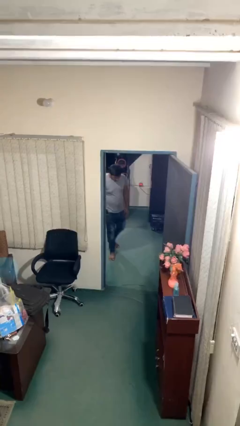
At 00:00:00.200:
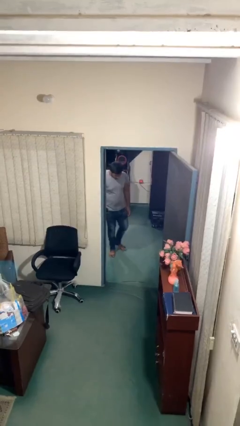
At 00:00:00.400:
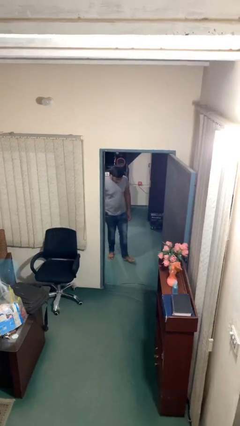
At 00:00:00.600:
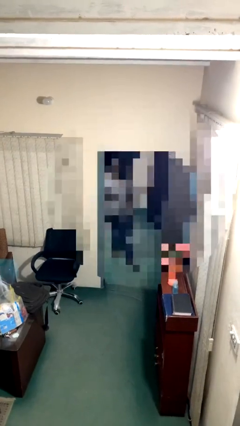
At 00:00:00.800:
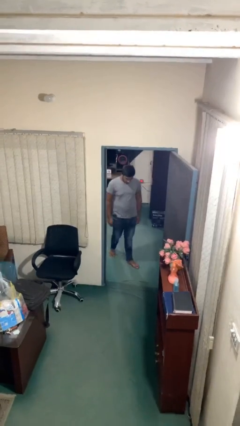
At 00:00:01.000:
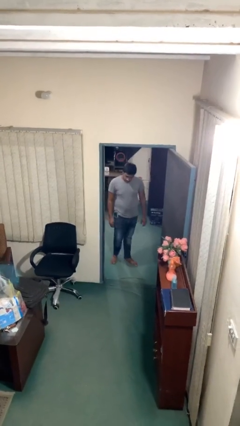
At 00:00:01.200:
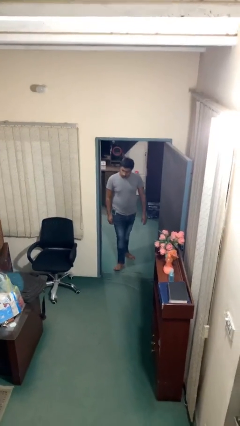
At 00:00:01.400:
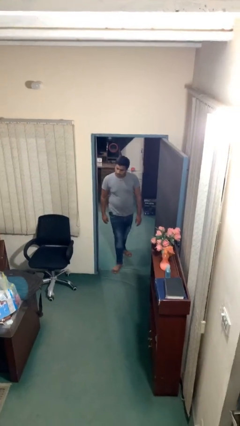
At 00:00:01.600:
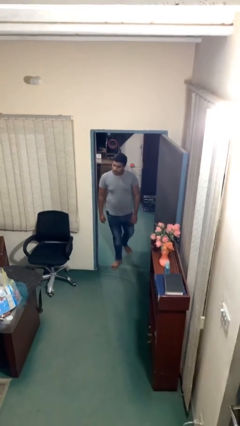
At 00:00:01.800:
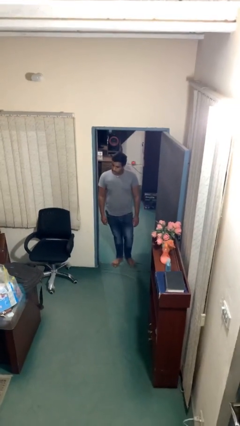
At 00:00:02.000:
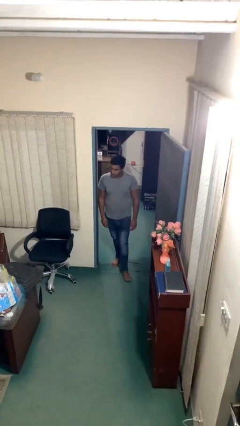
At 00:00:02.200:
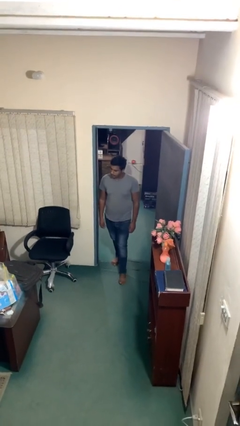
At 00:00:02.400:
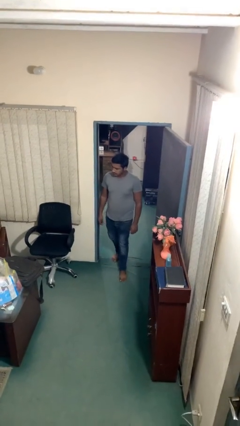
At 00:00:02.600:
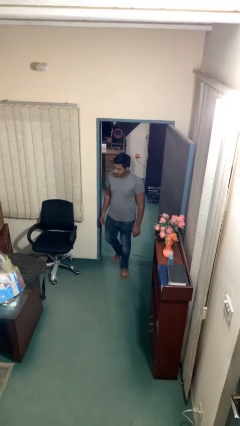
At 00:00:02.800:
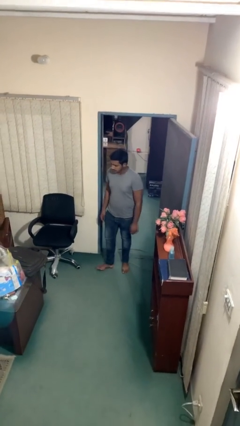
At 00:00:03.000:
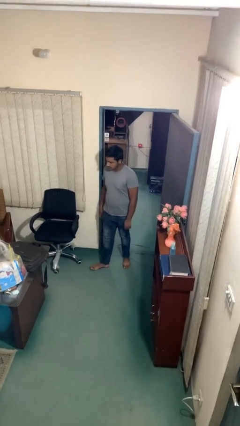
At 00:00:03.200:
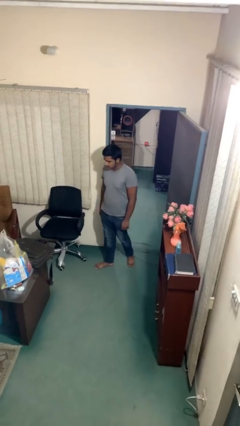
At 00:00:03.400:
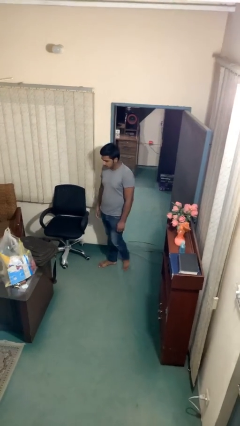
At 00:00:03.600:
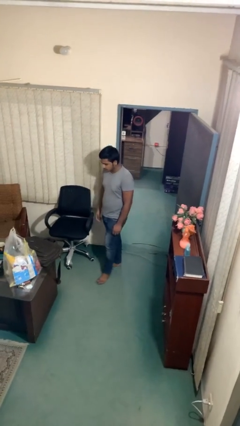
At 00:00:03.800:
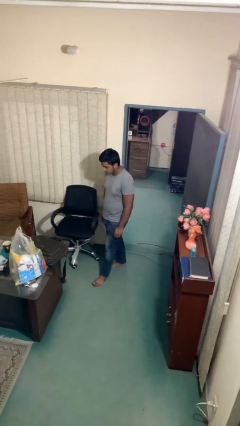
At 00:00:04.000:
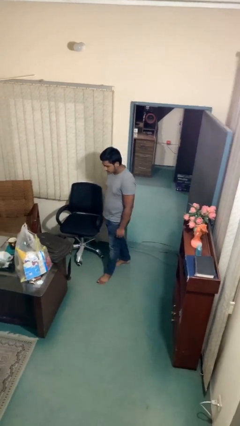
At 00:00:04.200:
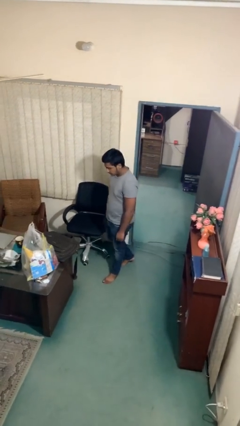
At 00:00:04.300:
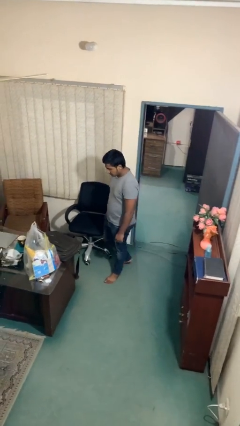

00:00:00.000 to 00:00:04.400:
person enters scene through structure

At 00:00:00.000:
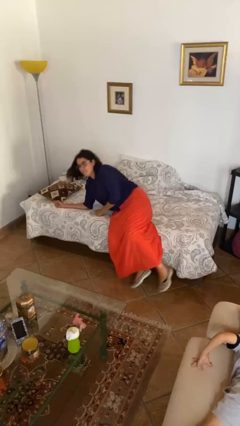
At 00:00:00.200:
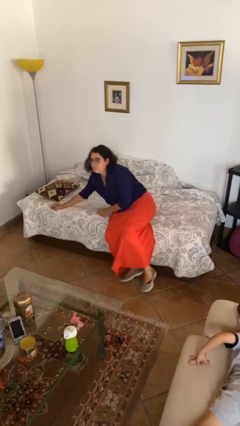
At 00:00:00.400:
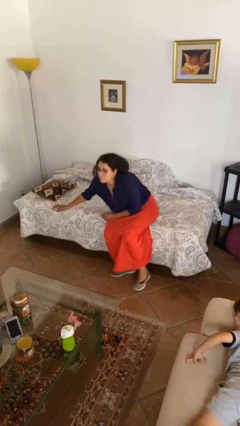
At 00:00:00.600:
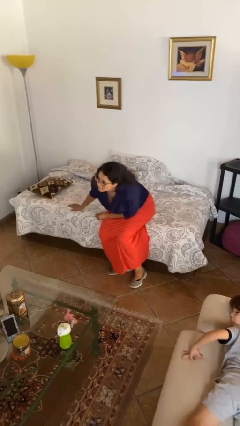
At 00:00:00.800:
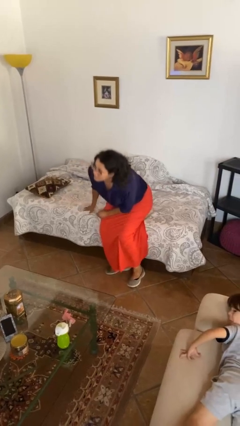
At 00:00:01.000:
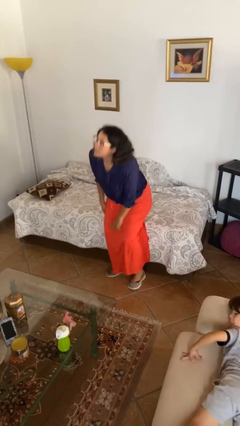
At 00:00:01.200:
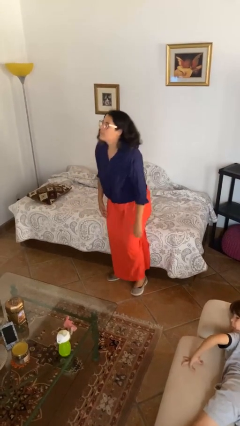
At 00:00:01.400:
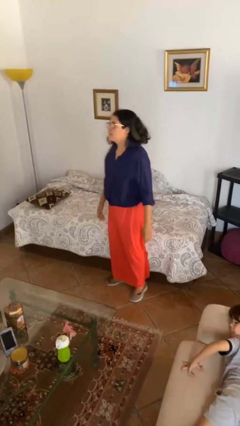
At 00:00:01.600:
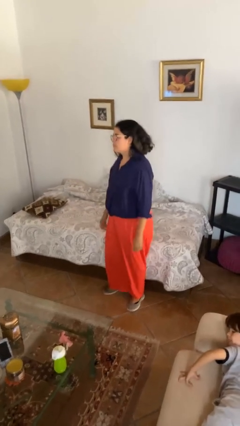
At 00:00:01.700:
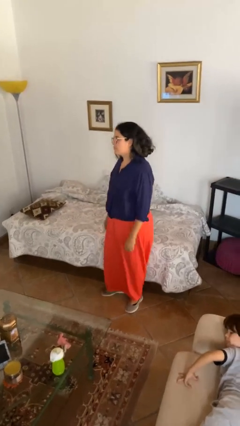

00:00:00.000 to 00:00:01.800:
person stands up

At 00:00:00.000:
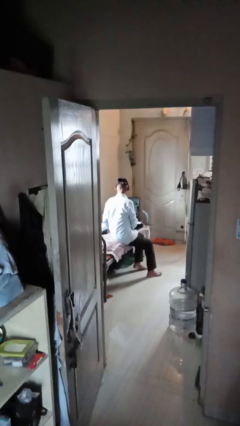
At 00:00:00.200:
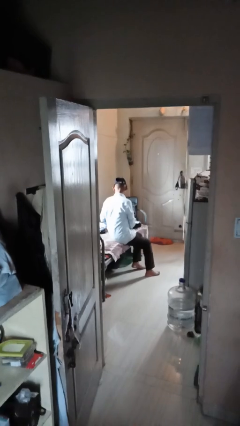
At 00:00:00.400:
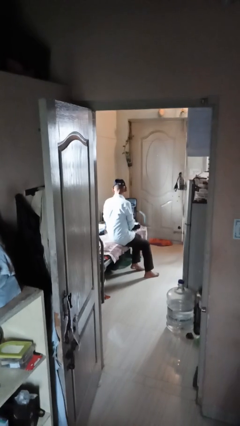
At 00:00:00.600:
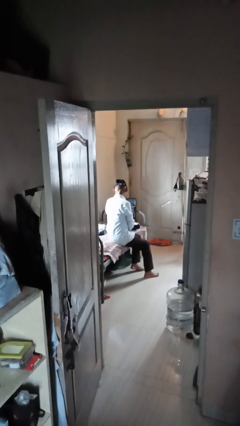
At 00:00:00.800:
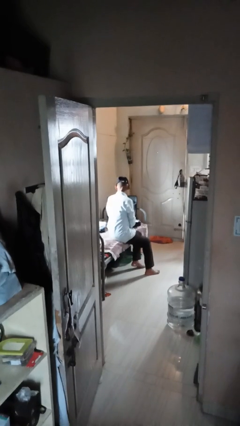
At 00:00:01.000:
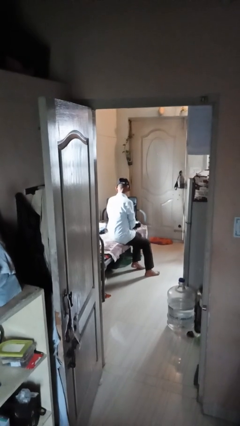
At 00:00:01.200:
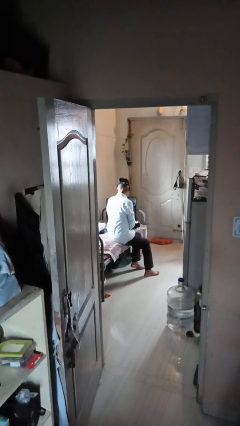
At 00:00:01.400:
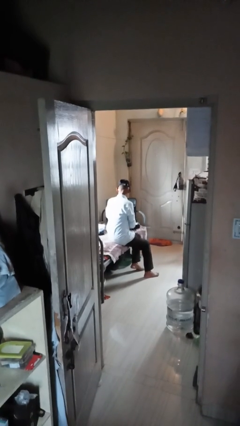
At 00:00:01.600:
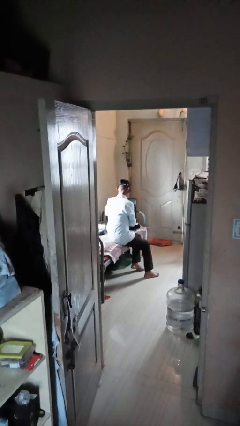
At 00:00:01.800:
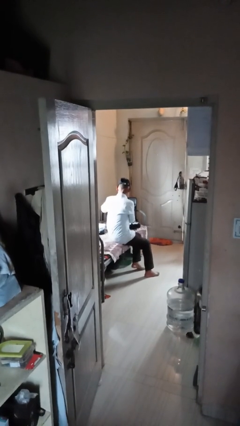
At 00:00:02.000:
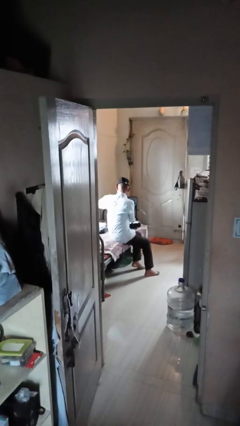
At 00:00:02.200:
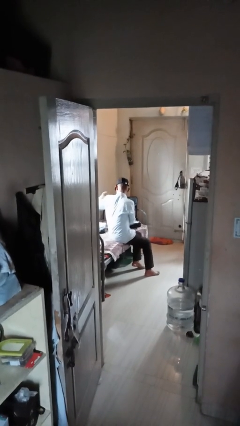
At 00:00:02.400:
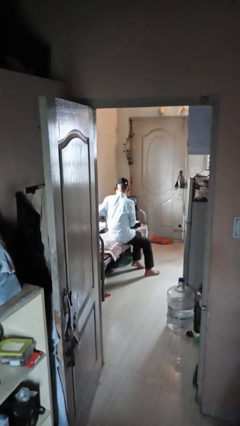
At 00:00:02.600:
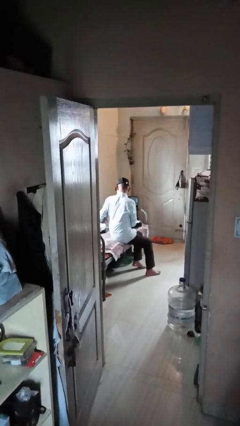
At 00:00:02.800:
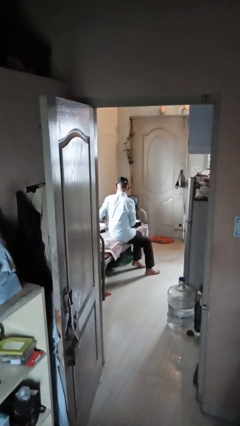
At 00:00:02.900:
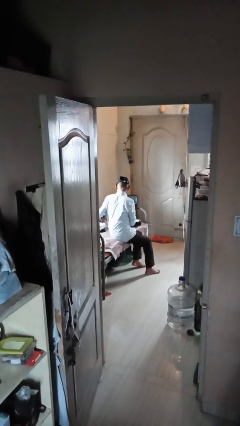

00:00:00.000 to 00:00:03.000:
person unloads clothes from suitcase

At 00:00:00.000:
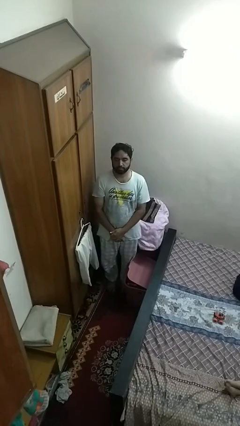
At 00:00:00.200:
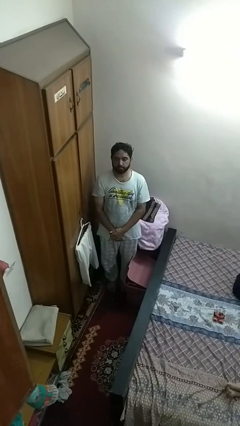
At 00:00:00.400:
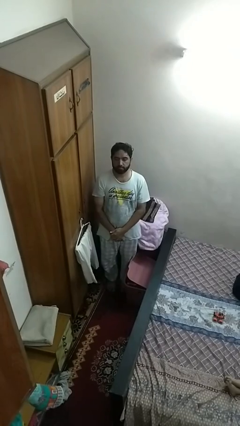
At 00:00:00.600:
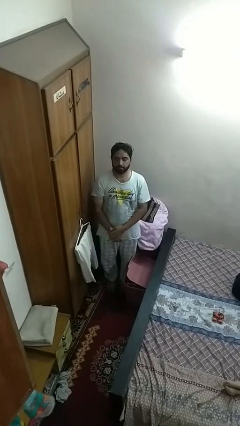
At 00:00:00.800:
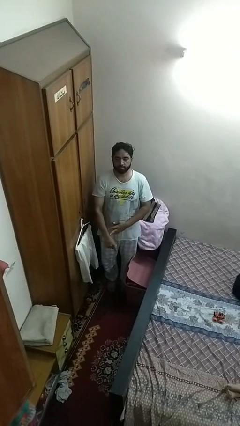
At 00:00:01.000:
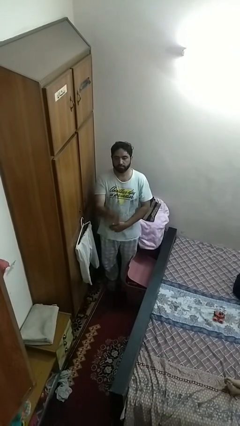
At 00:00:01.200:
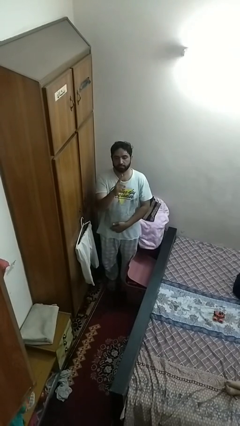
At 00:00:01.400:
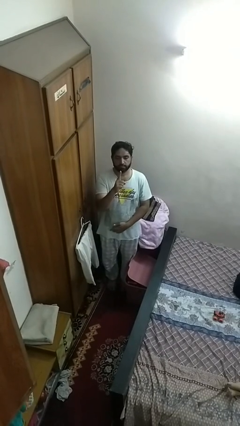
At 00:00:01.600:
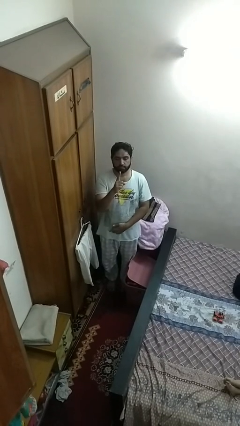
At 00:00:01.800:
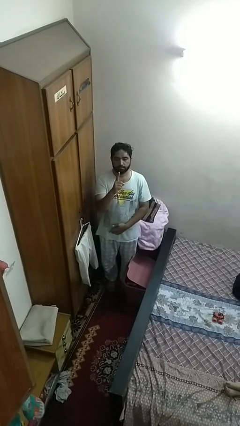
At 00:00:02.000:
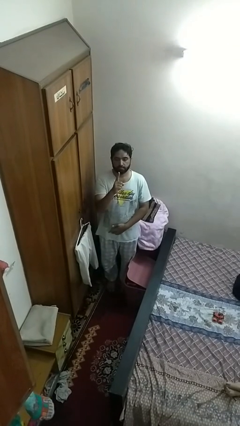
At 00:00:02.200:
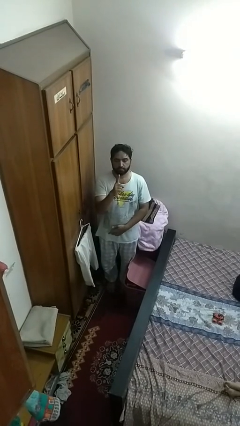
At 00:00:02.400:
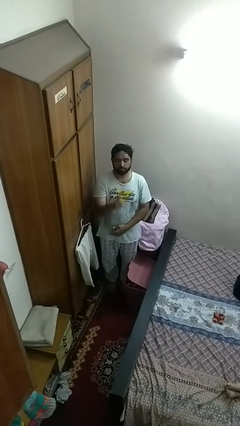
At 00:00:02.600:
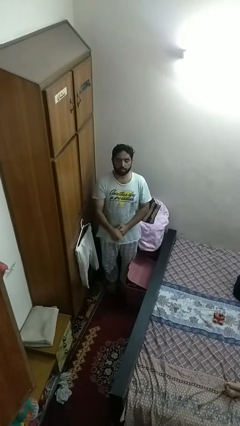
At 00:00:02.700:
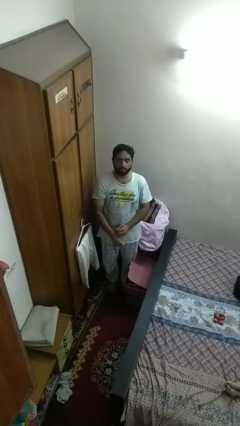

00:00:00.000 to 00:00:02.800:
person gestures number one

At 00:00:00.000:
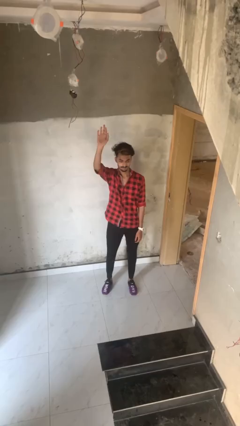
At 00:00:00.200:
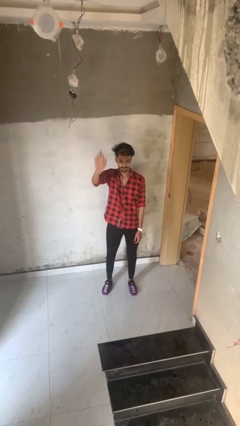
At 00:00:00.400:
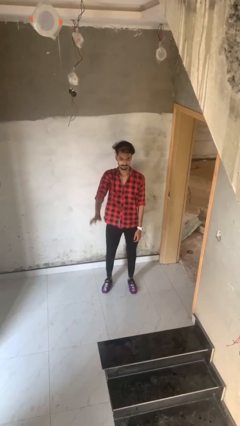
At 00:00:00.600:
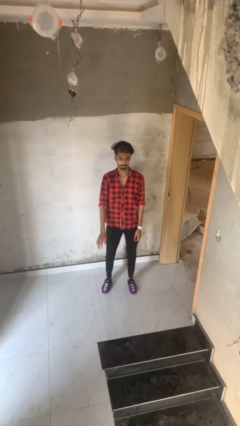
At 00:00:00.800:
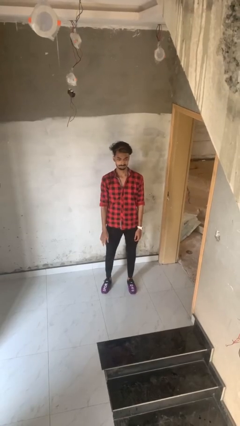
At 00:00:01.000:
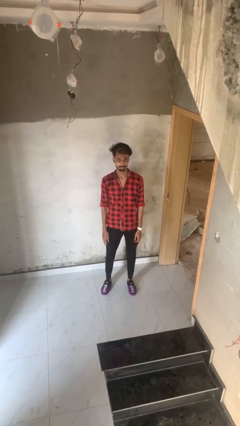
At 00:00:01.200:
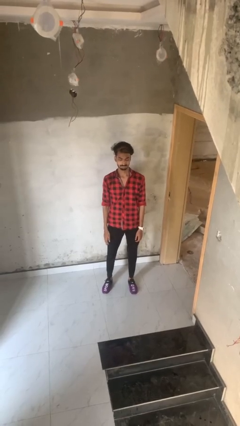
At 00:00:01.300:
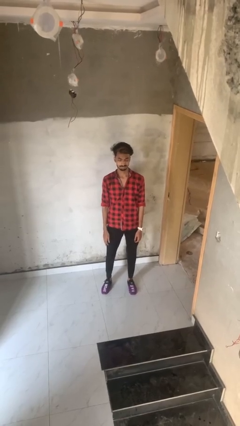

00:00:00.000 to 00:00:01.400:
person gestures lower hand

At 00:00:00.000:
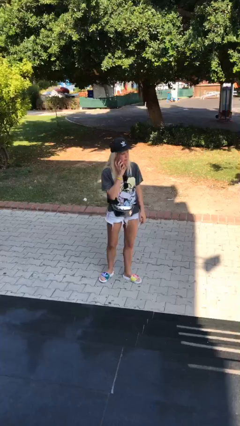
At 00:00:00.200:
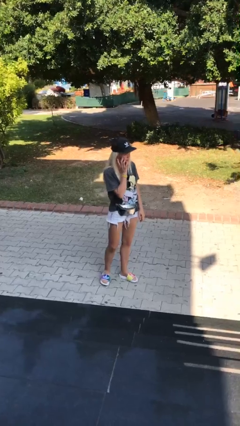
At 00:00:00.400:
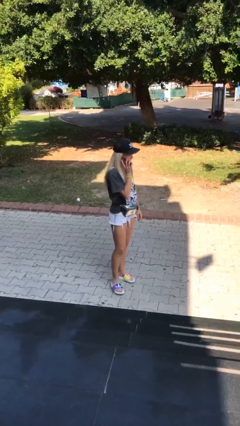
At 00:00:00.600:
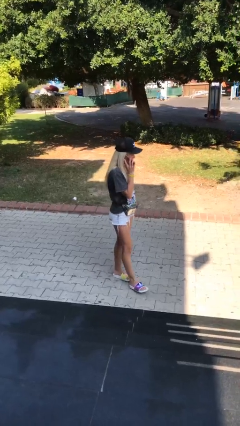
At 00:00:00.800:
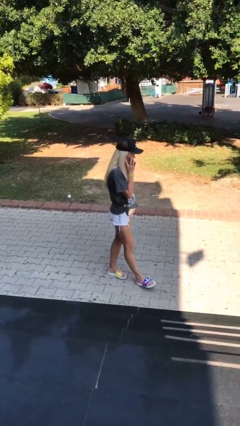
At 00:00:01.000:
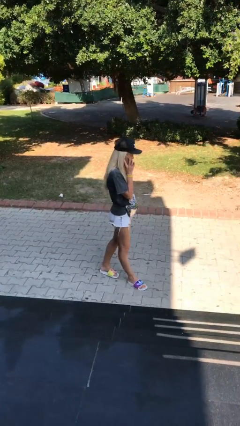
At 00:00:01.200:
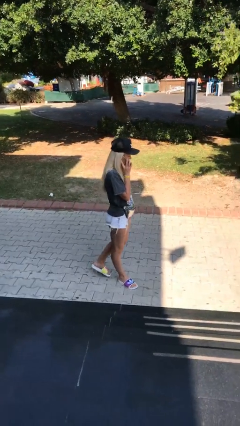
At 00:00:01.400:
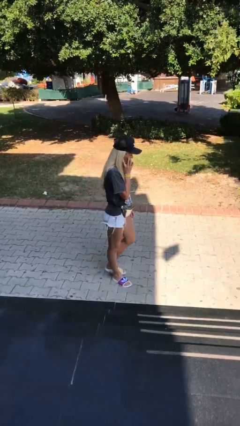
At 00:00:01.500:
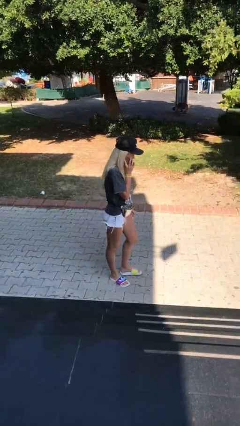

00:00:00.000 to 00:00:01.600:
person talks on phone

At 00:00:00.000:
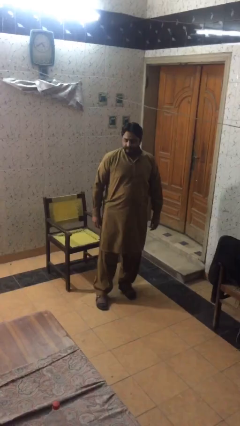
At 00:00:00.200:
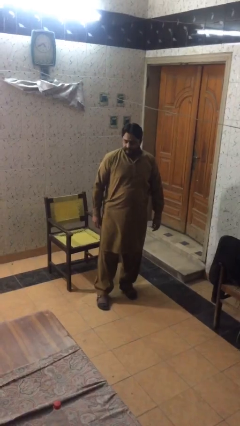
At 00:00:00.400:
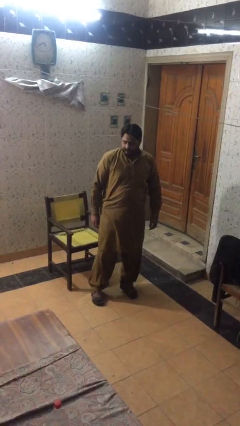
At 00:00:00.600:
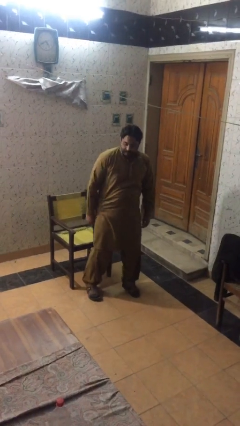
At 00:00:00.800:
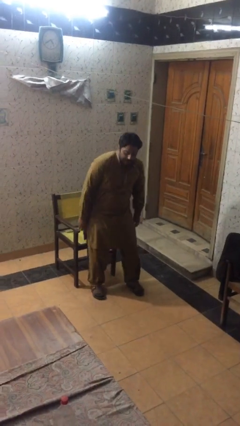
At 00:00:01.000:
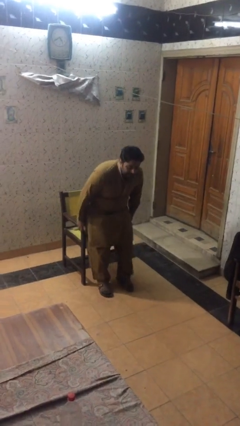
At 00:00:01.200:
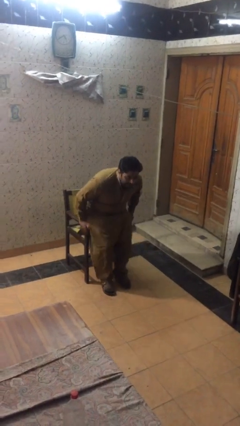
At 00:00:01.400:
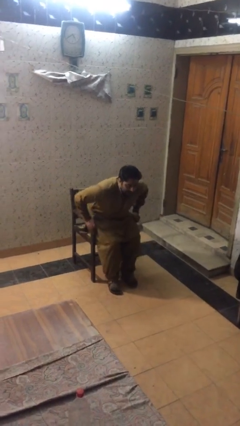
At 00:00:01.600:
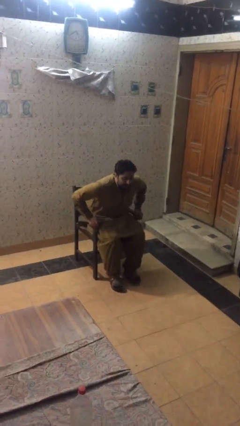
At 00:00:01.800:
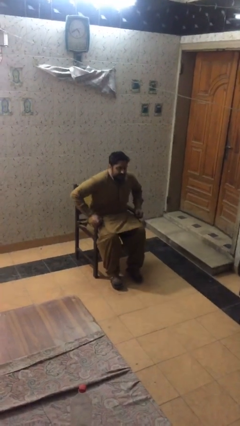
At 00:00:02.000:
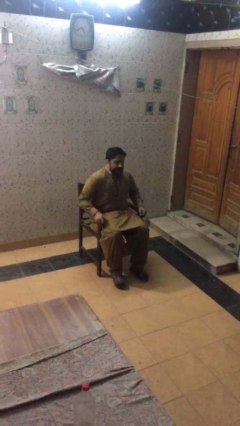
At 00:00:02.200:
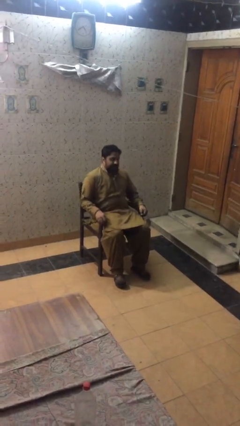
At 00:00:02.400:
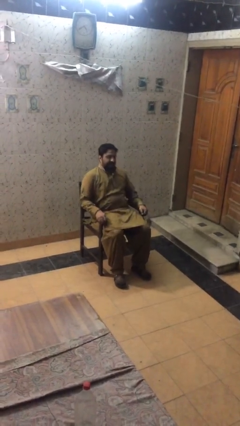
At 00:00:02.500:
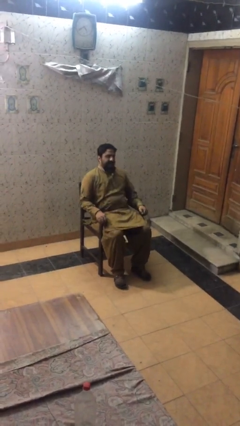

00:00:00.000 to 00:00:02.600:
person sits down
